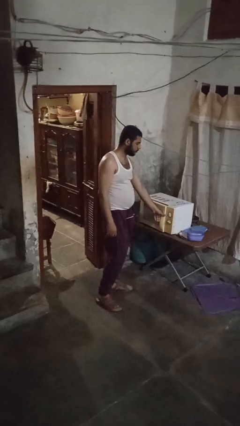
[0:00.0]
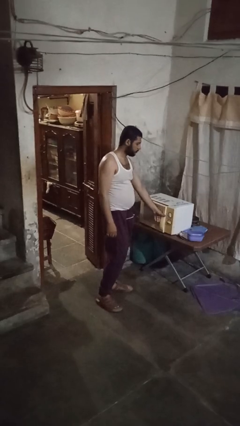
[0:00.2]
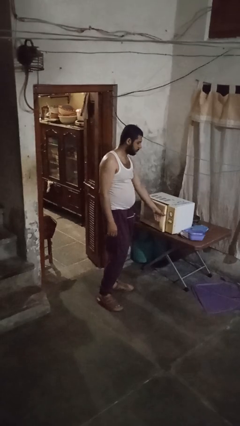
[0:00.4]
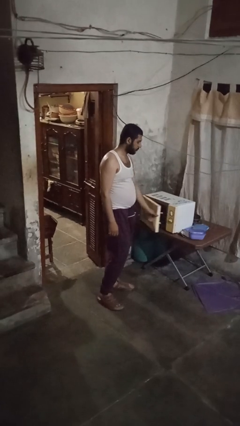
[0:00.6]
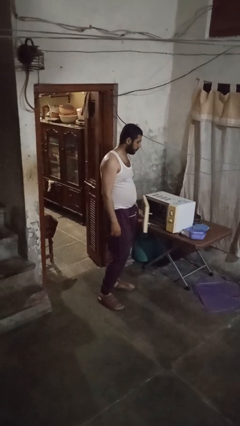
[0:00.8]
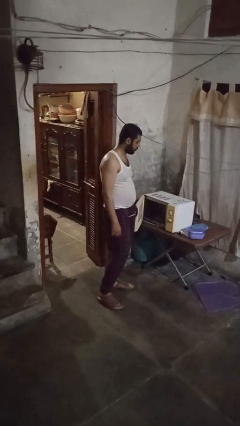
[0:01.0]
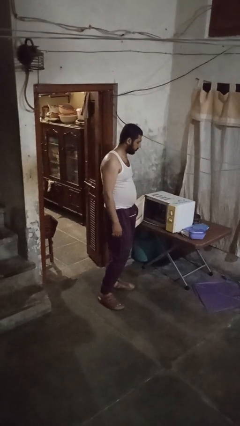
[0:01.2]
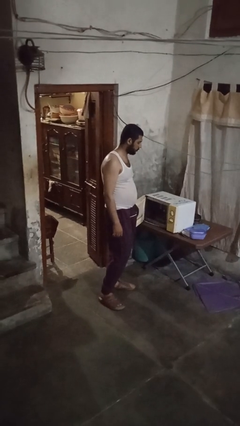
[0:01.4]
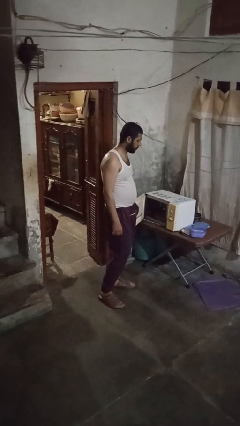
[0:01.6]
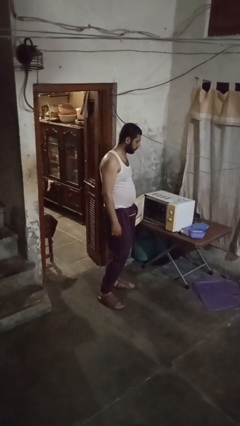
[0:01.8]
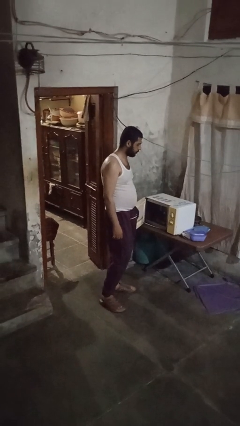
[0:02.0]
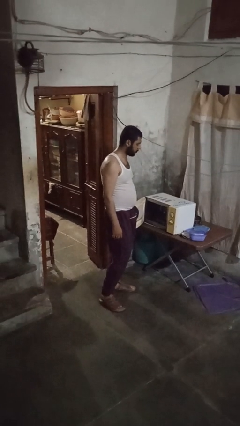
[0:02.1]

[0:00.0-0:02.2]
person opens microwave

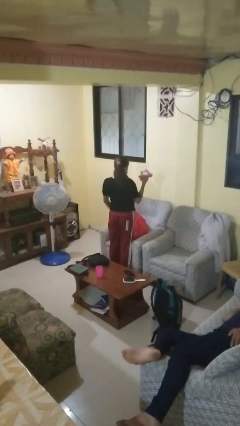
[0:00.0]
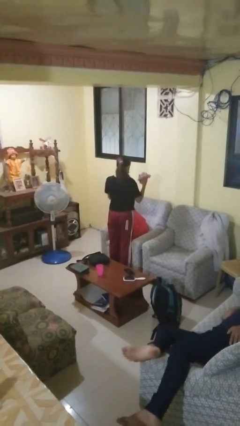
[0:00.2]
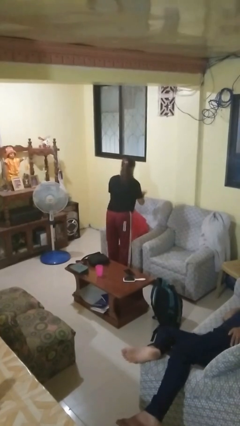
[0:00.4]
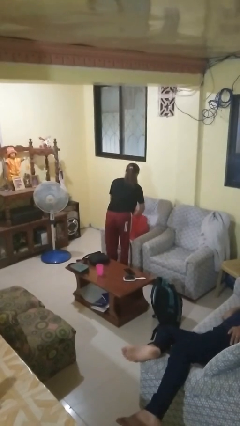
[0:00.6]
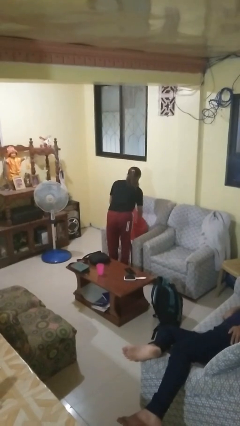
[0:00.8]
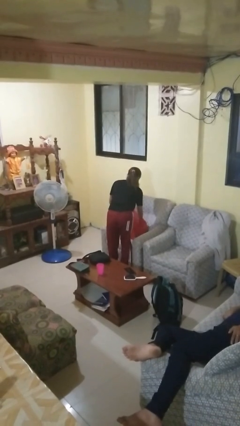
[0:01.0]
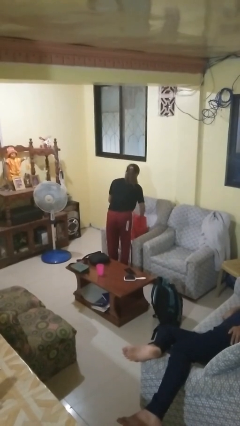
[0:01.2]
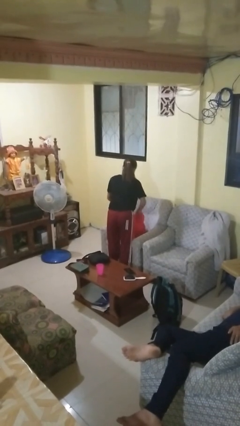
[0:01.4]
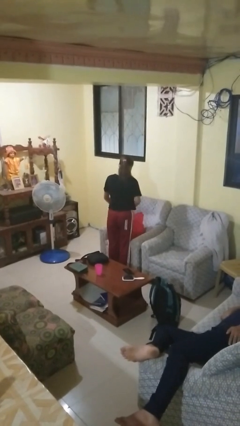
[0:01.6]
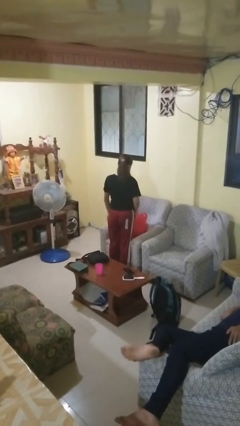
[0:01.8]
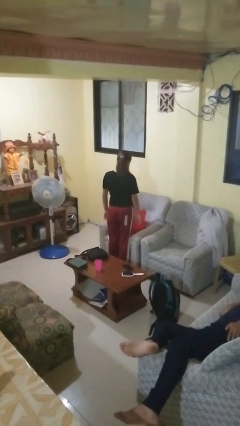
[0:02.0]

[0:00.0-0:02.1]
person puts object into bag

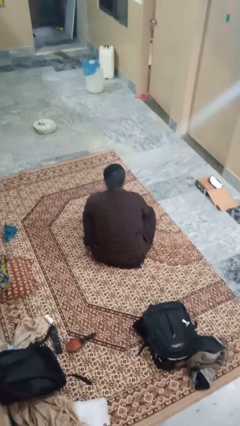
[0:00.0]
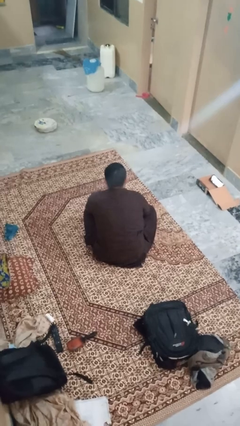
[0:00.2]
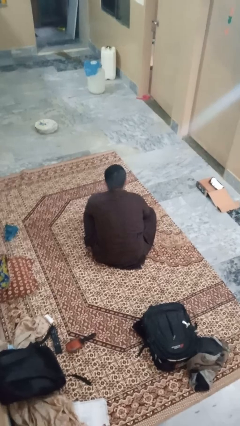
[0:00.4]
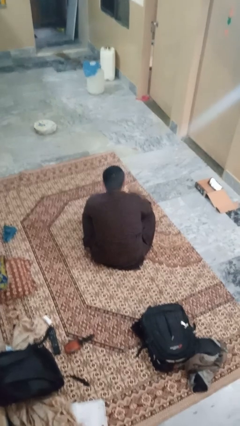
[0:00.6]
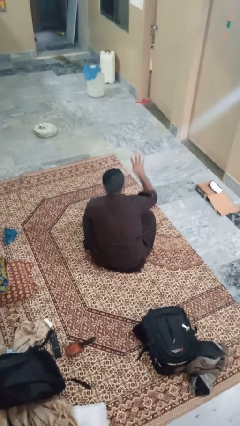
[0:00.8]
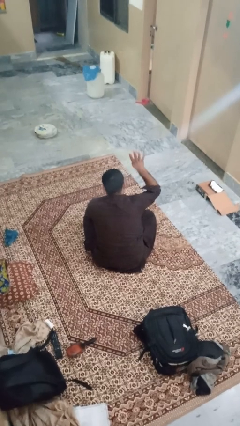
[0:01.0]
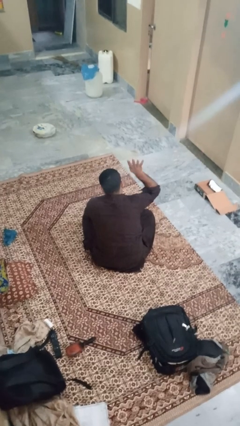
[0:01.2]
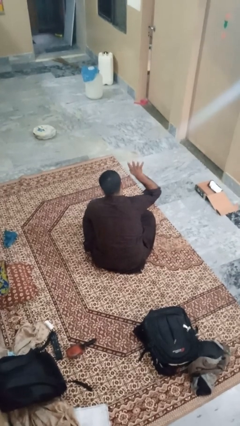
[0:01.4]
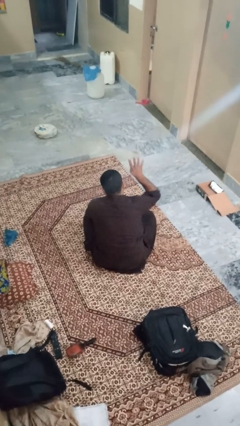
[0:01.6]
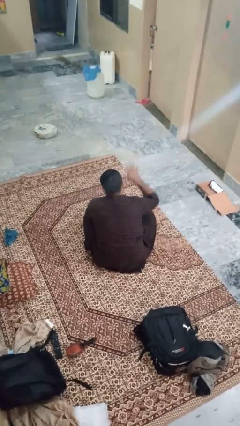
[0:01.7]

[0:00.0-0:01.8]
person gestures number four

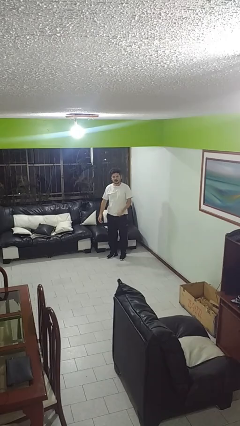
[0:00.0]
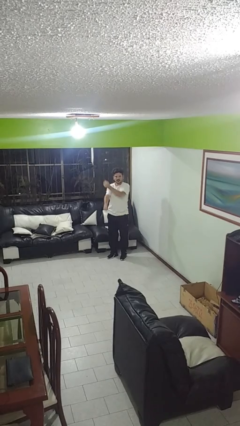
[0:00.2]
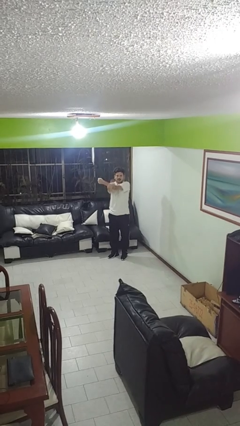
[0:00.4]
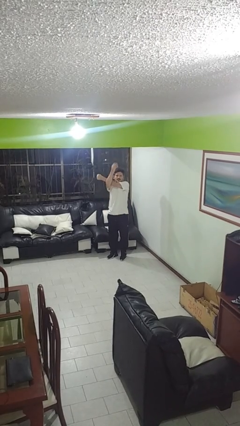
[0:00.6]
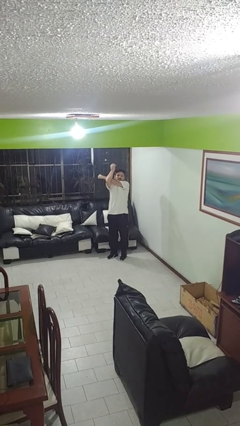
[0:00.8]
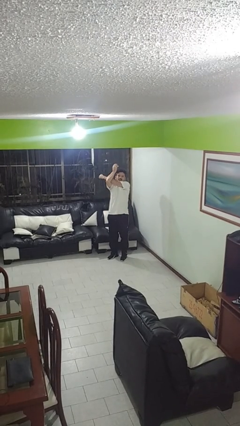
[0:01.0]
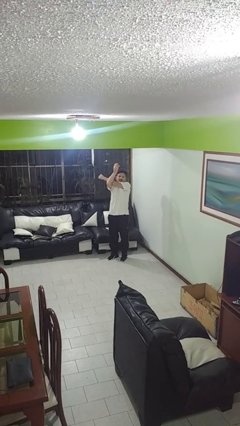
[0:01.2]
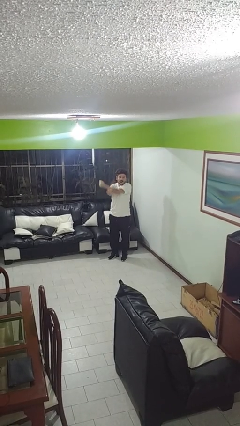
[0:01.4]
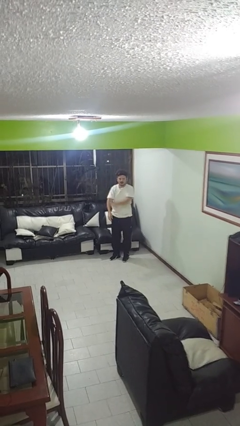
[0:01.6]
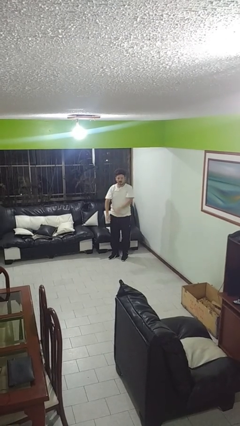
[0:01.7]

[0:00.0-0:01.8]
person stretches arms to side

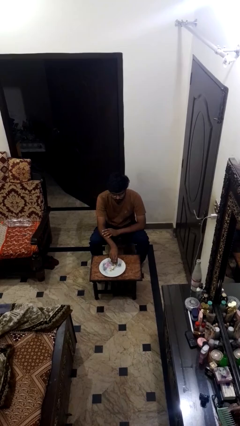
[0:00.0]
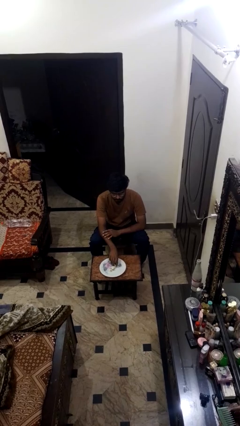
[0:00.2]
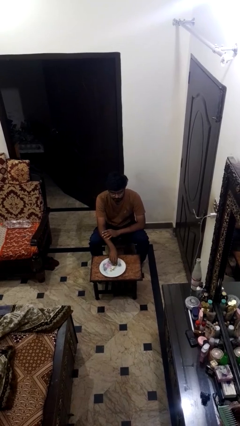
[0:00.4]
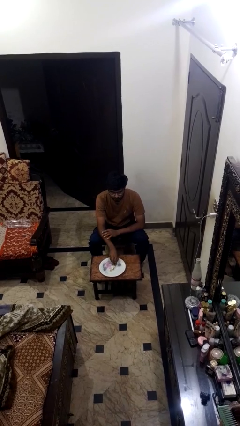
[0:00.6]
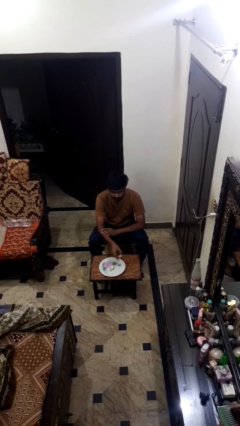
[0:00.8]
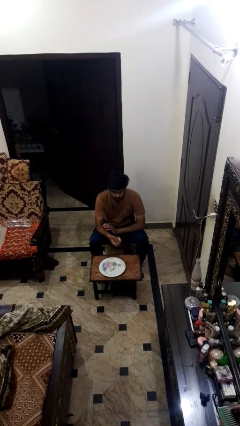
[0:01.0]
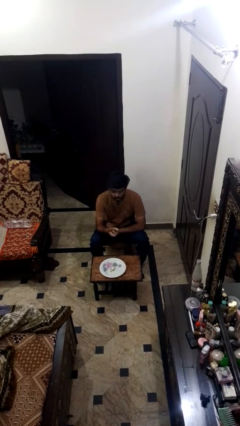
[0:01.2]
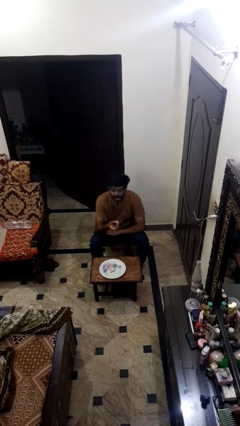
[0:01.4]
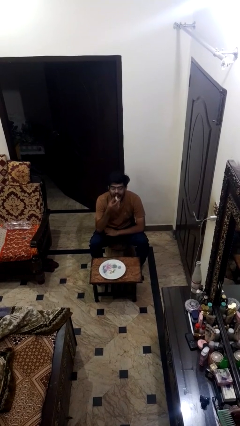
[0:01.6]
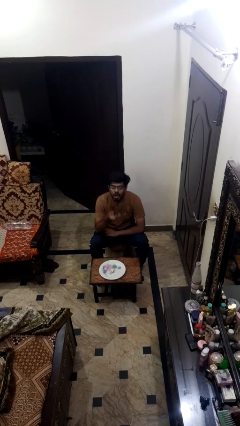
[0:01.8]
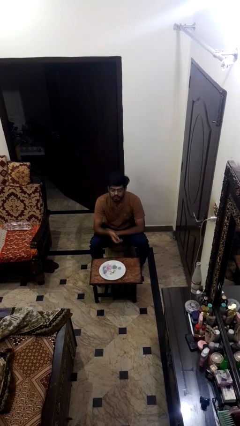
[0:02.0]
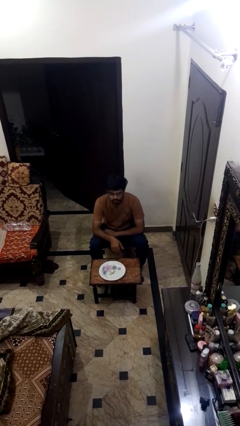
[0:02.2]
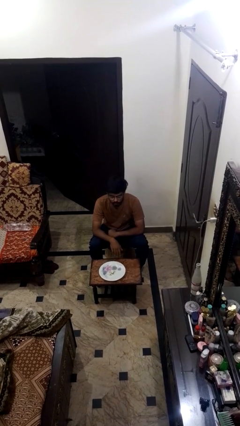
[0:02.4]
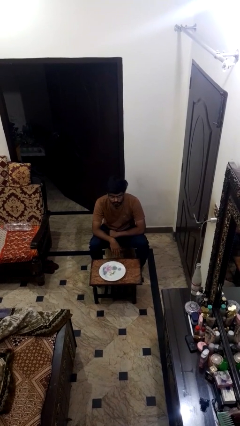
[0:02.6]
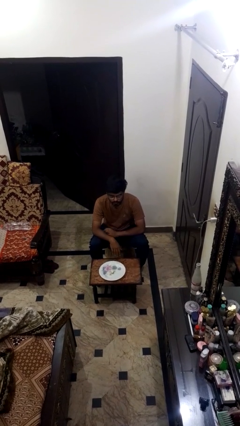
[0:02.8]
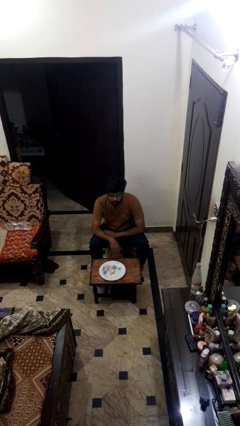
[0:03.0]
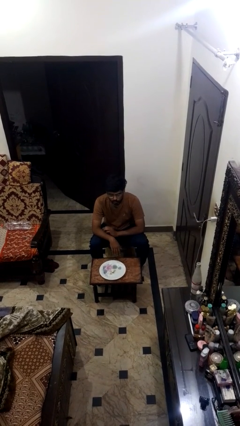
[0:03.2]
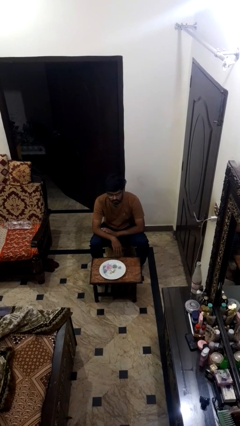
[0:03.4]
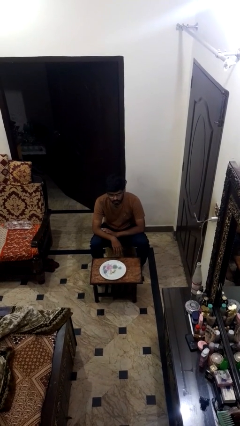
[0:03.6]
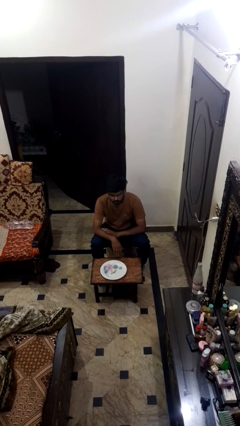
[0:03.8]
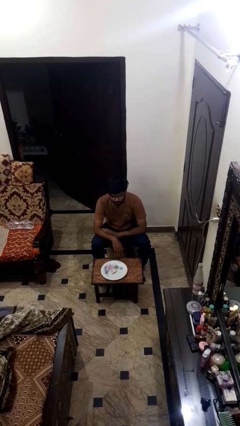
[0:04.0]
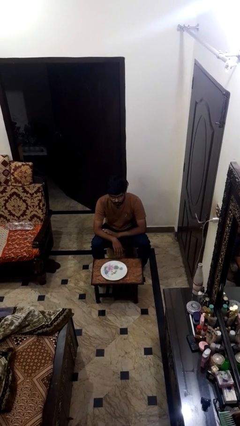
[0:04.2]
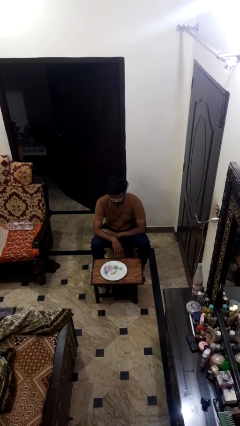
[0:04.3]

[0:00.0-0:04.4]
person eats with hands

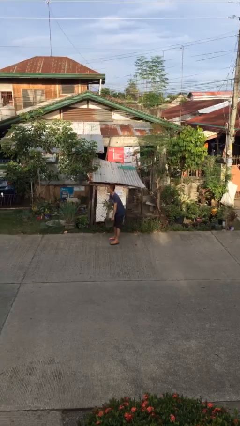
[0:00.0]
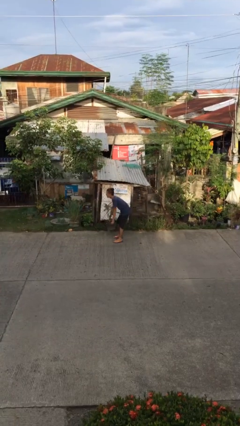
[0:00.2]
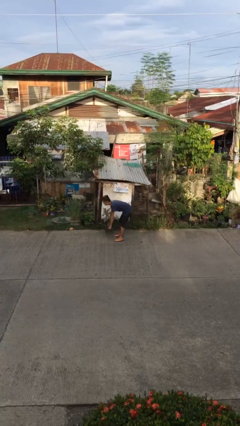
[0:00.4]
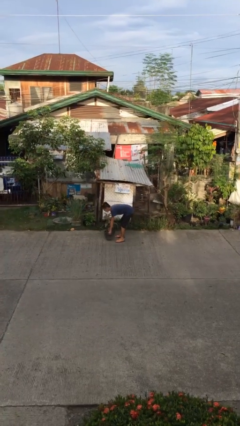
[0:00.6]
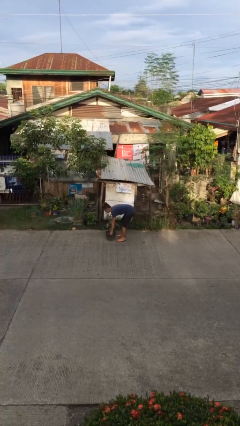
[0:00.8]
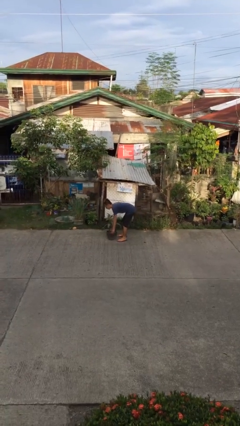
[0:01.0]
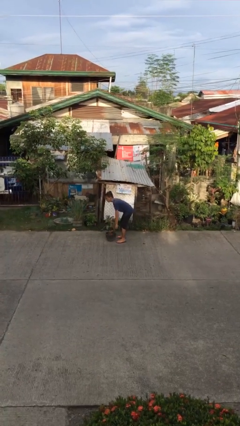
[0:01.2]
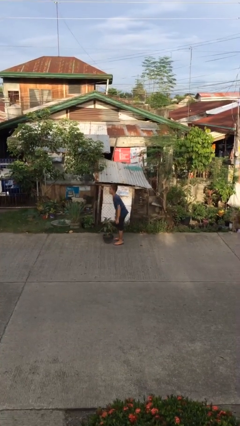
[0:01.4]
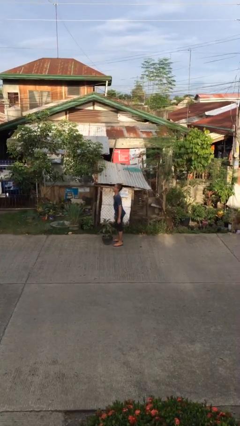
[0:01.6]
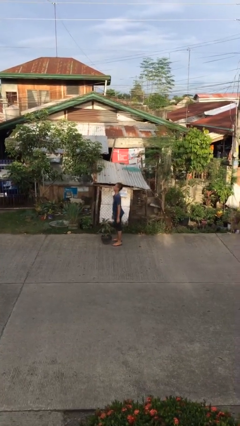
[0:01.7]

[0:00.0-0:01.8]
person puts down object on floor

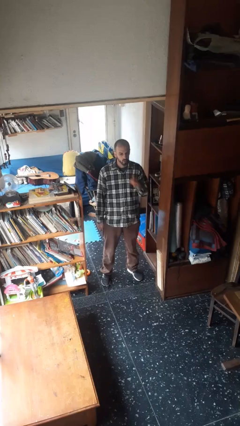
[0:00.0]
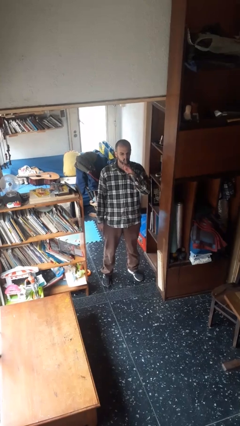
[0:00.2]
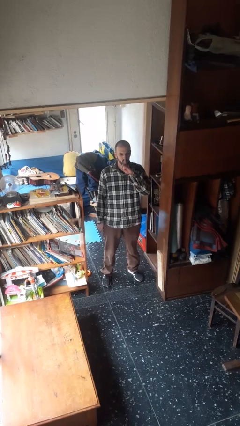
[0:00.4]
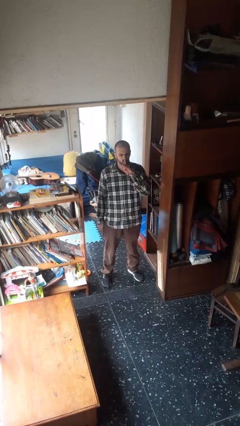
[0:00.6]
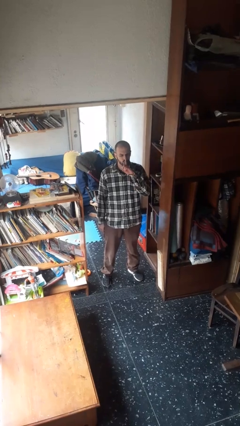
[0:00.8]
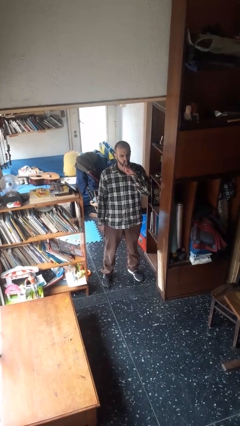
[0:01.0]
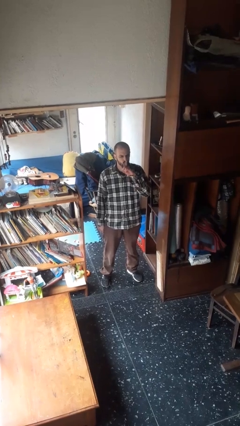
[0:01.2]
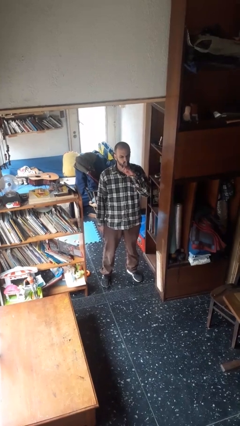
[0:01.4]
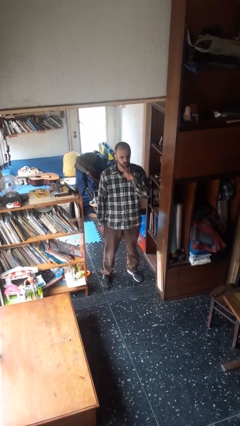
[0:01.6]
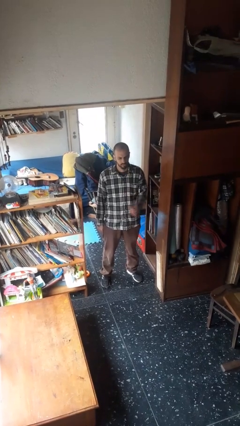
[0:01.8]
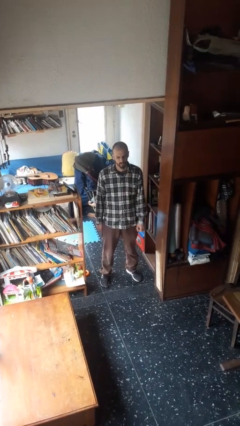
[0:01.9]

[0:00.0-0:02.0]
person gestures be quiet

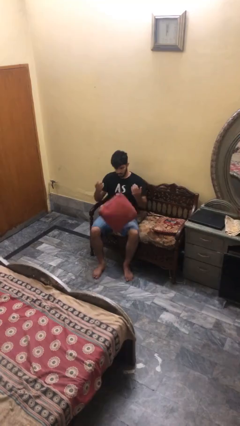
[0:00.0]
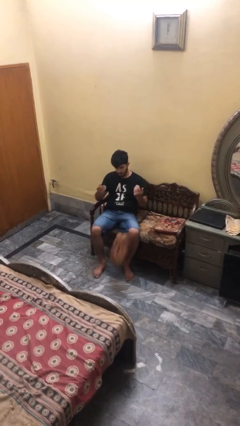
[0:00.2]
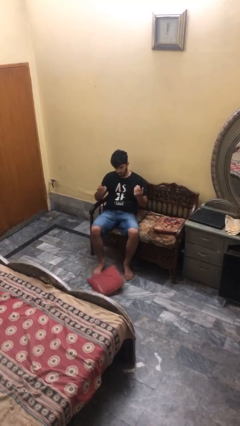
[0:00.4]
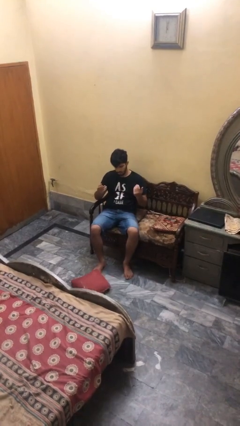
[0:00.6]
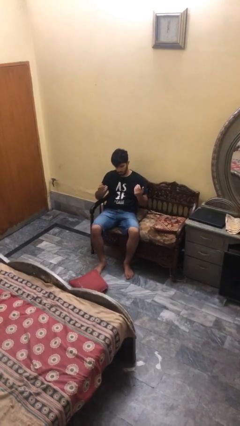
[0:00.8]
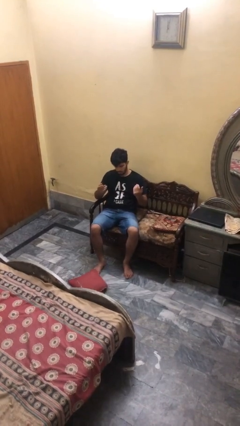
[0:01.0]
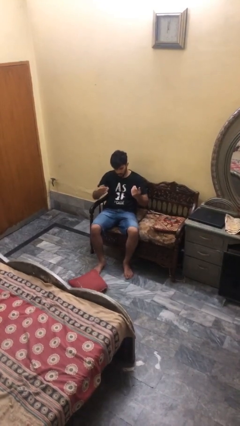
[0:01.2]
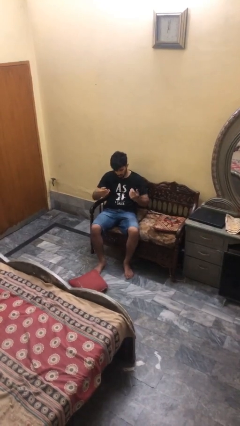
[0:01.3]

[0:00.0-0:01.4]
person drops object
